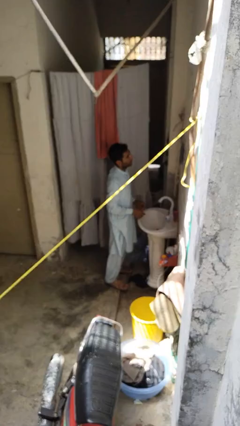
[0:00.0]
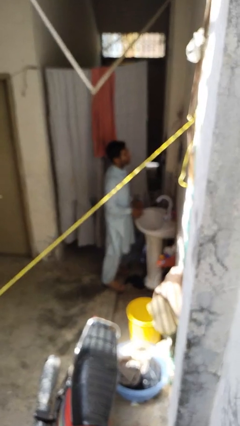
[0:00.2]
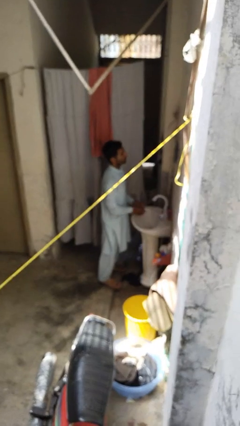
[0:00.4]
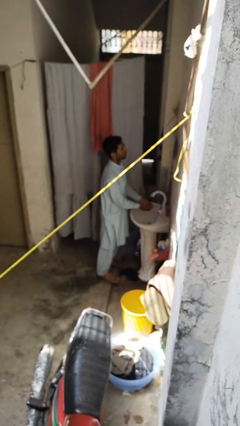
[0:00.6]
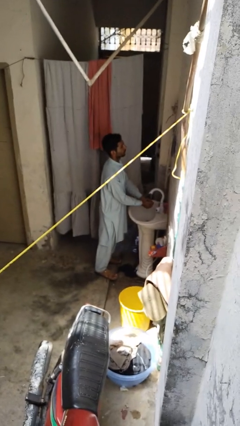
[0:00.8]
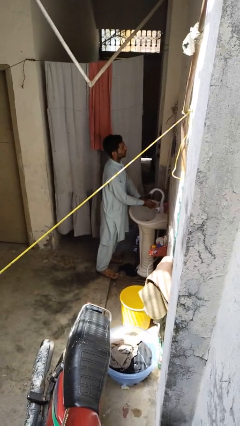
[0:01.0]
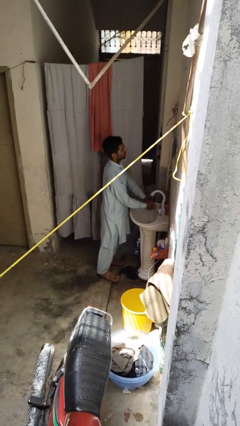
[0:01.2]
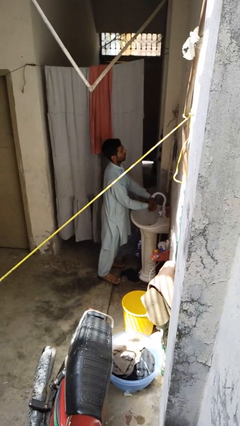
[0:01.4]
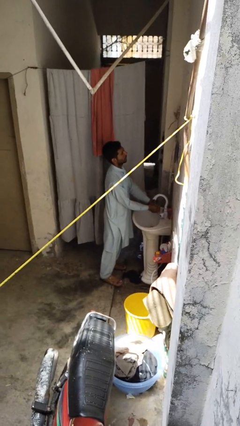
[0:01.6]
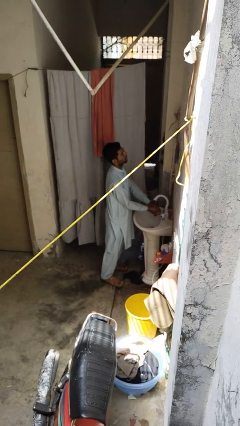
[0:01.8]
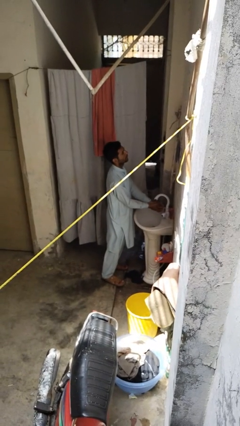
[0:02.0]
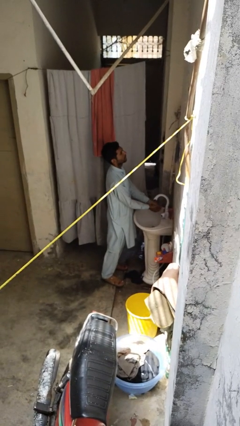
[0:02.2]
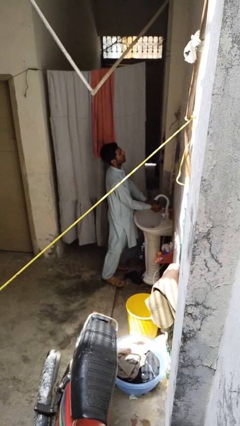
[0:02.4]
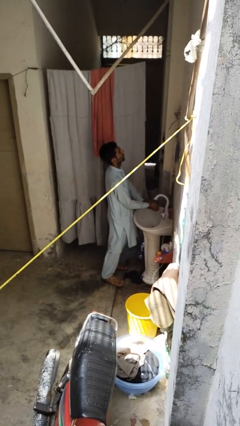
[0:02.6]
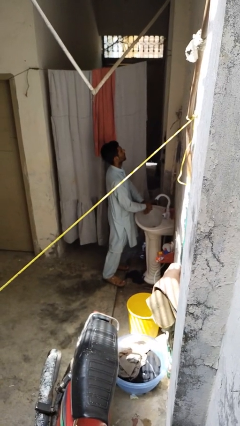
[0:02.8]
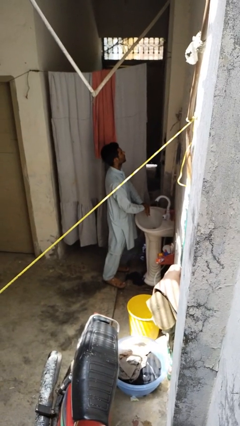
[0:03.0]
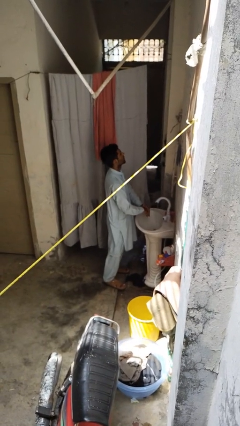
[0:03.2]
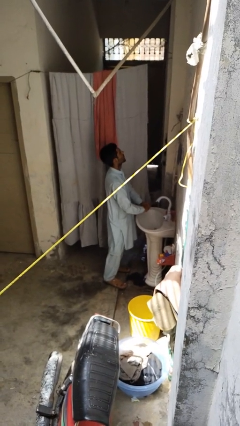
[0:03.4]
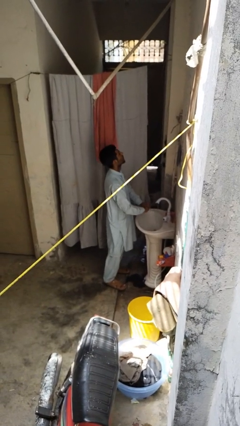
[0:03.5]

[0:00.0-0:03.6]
person washes hands

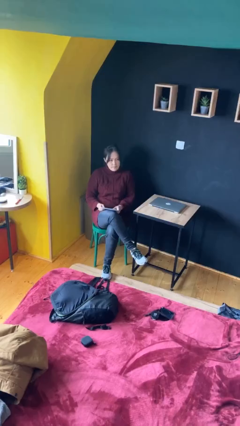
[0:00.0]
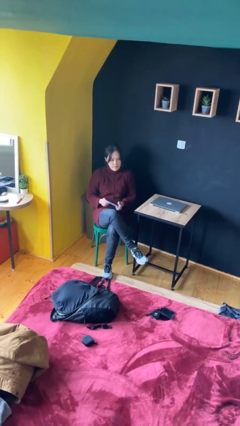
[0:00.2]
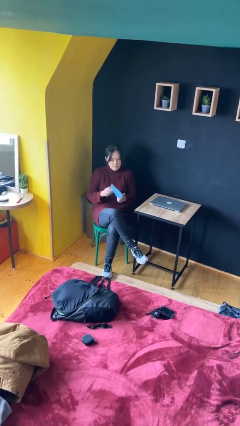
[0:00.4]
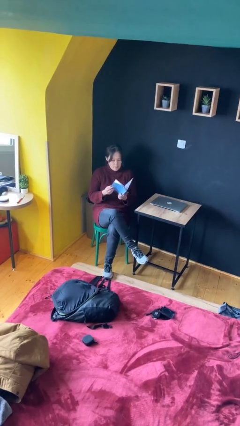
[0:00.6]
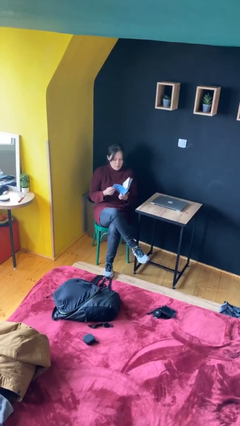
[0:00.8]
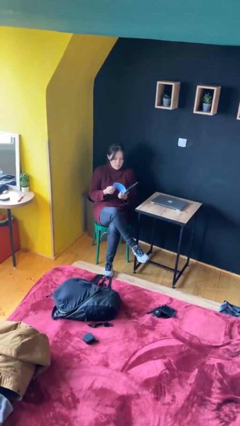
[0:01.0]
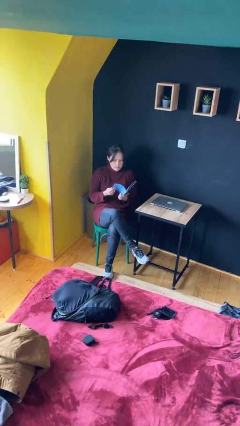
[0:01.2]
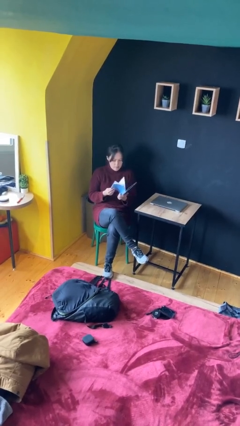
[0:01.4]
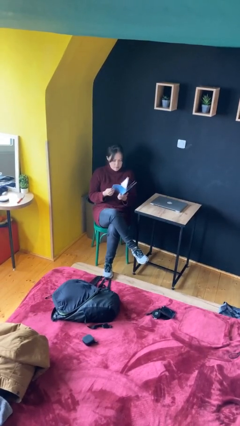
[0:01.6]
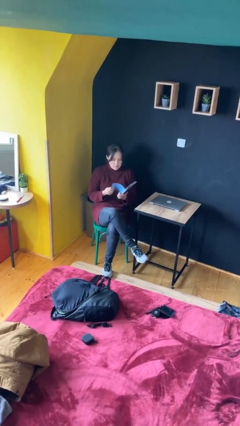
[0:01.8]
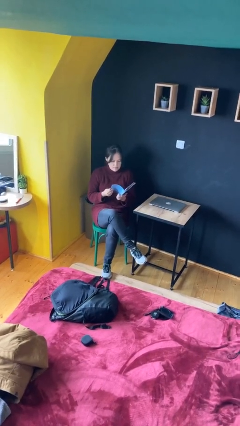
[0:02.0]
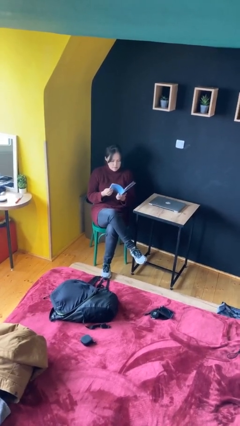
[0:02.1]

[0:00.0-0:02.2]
person reads document

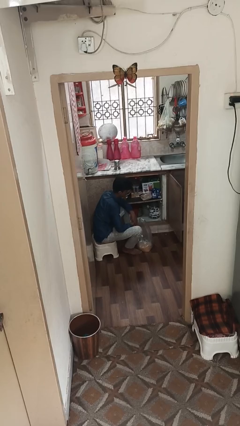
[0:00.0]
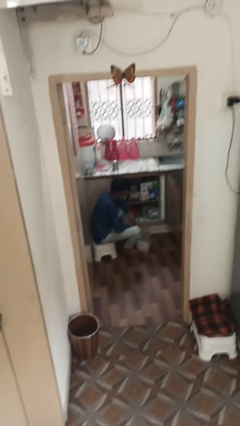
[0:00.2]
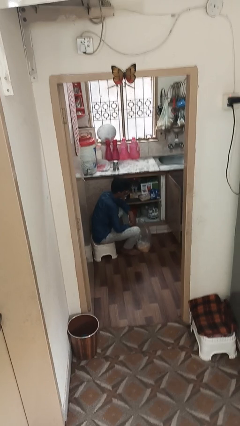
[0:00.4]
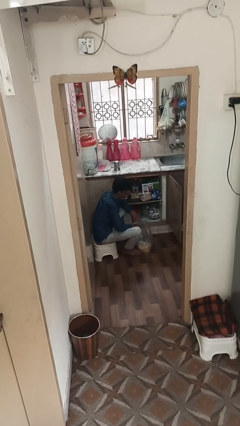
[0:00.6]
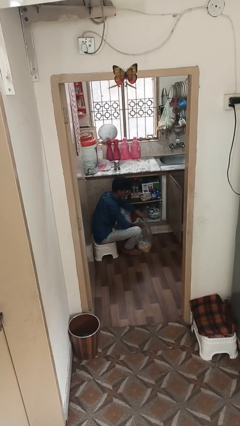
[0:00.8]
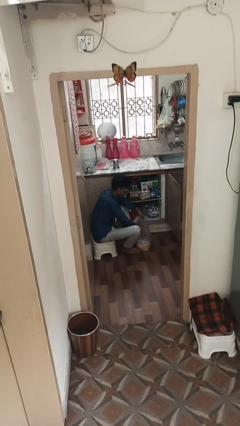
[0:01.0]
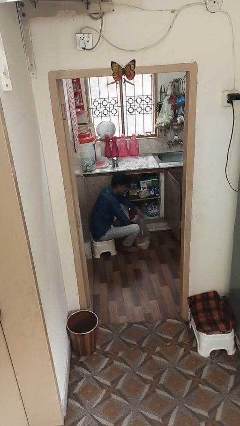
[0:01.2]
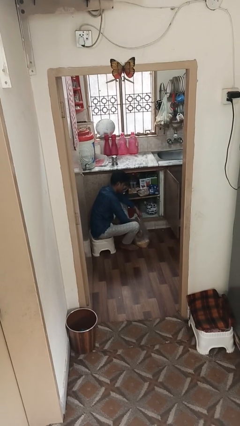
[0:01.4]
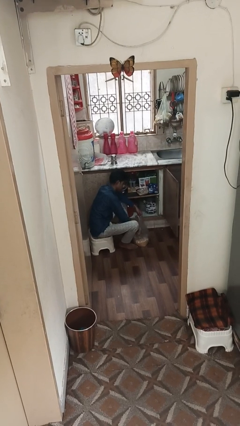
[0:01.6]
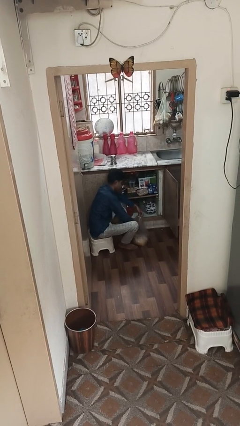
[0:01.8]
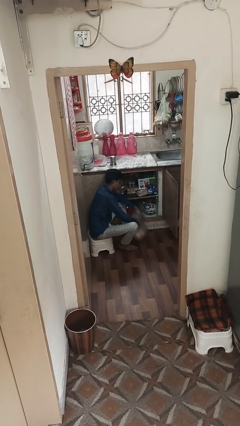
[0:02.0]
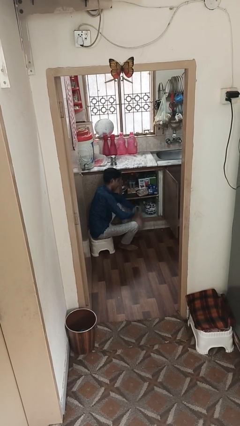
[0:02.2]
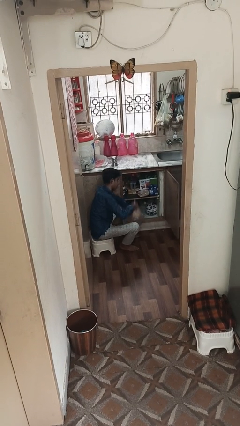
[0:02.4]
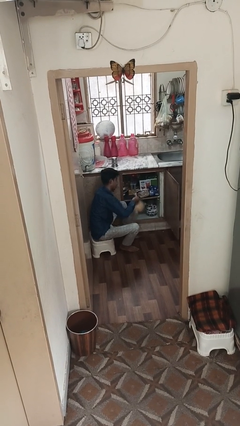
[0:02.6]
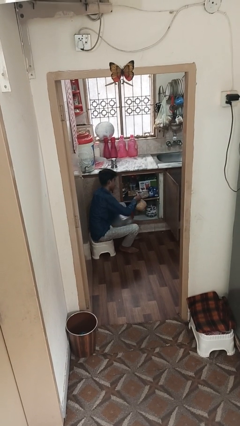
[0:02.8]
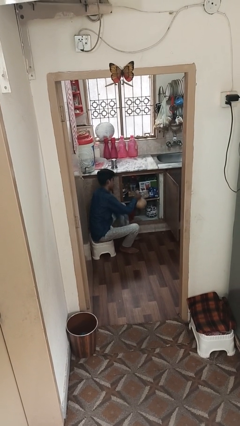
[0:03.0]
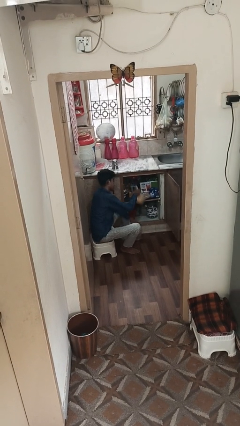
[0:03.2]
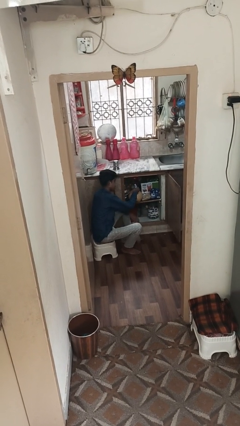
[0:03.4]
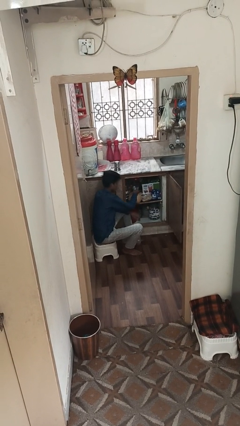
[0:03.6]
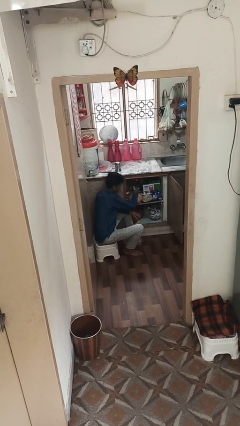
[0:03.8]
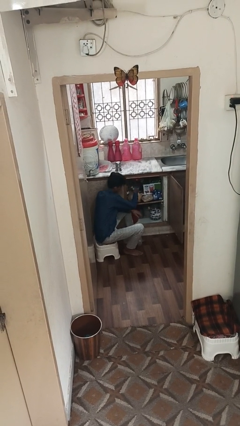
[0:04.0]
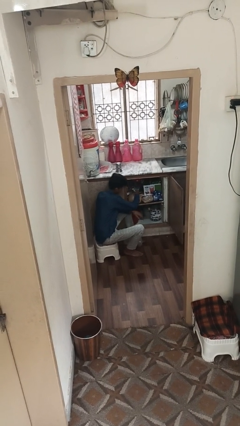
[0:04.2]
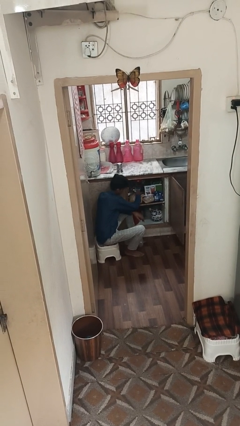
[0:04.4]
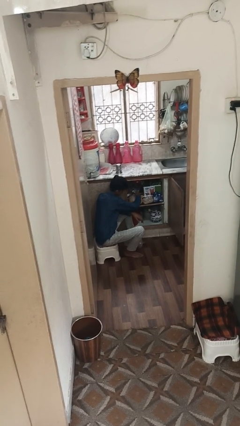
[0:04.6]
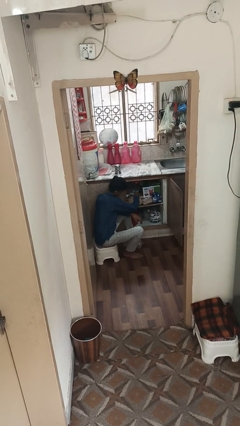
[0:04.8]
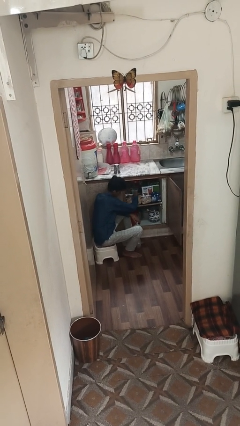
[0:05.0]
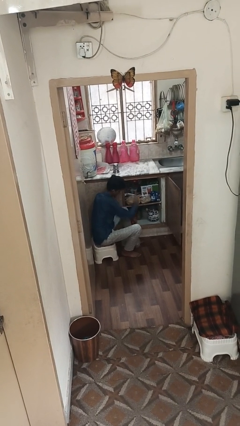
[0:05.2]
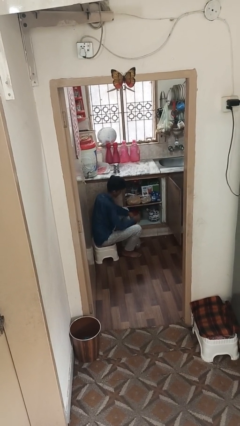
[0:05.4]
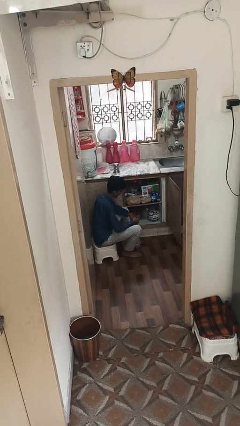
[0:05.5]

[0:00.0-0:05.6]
person loads groceries into cabinet

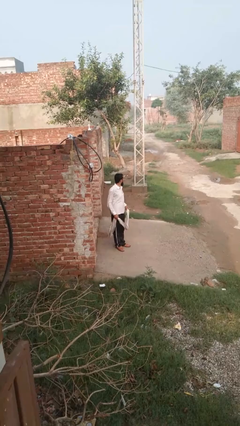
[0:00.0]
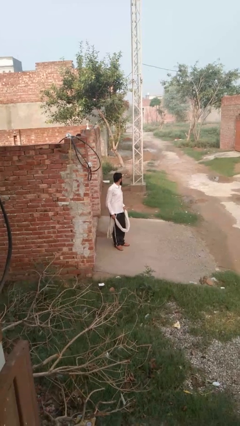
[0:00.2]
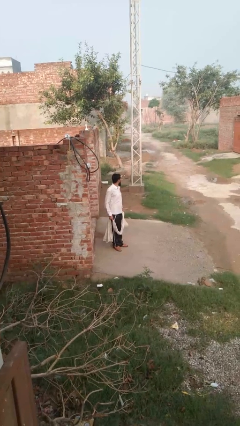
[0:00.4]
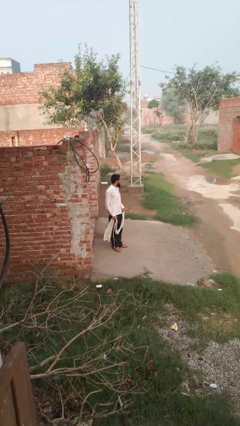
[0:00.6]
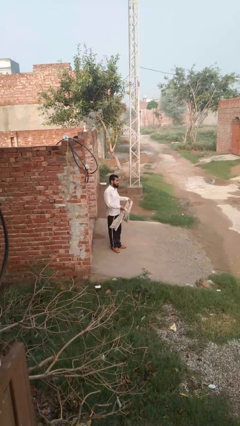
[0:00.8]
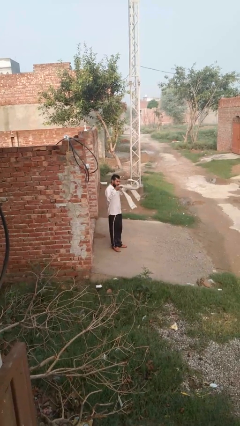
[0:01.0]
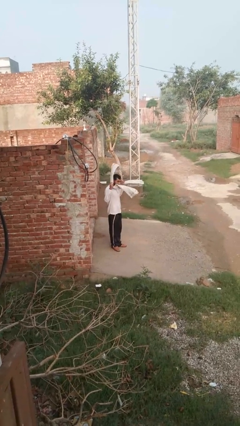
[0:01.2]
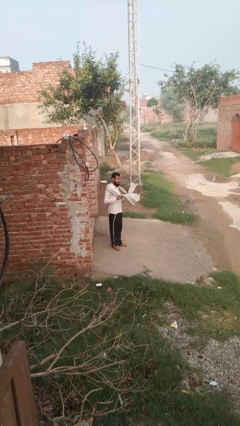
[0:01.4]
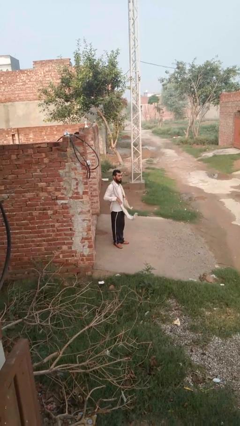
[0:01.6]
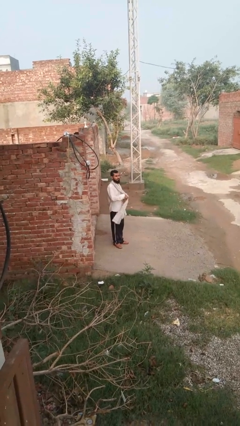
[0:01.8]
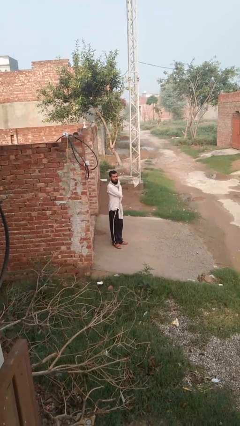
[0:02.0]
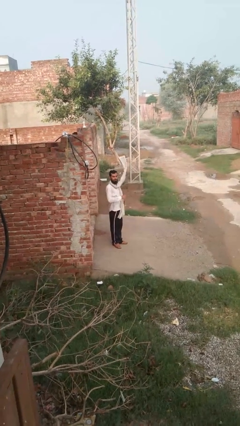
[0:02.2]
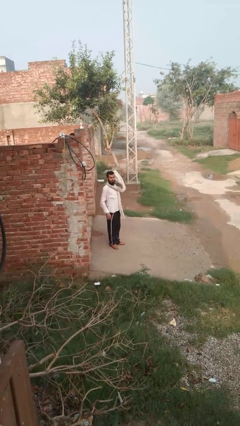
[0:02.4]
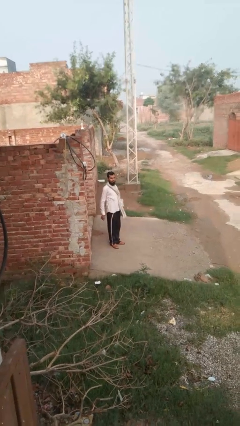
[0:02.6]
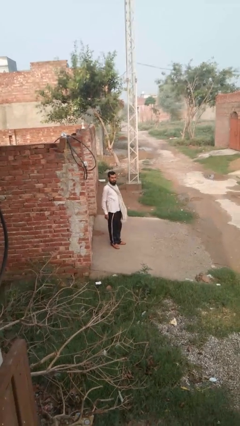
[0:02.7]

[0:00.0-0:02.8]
person puts on scarf

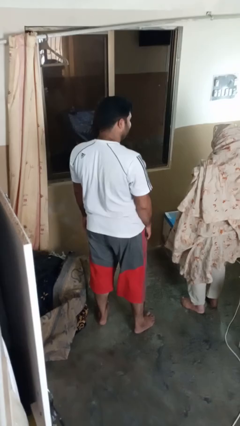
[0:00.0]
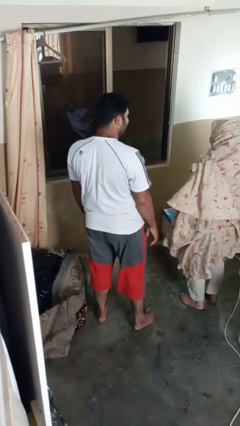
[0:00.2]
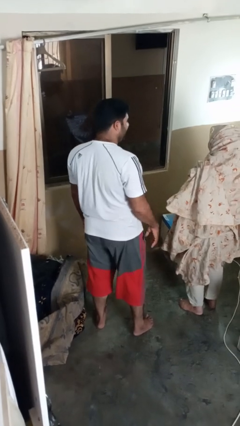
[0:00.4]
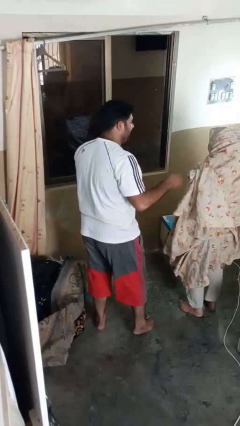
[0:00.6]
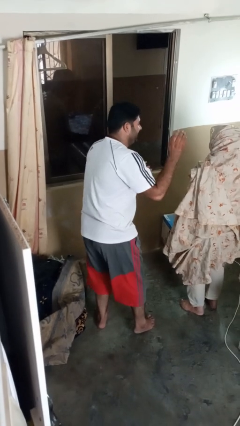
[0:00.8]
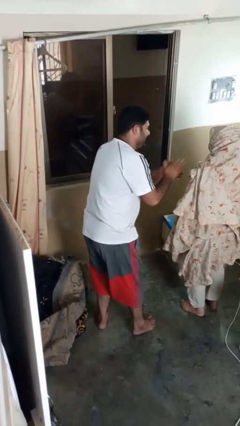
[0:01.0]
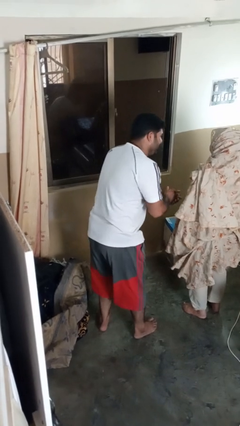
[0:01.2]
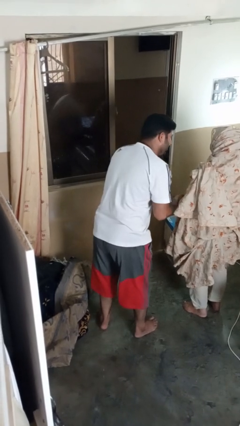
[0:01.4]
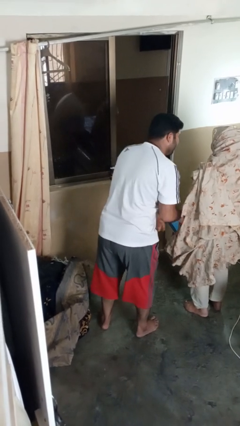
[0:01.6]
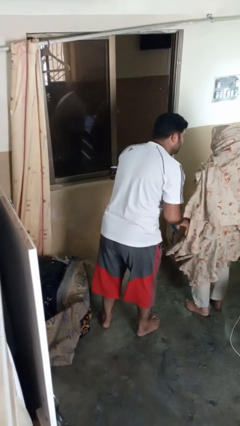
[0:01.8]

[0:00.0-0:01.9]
person laughs with person

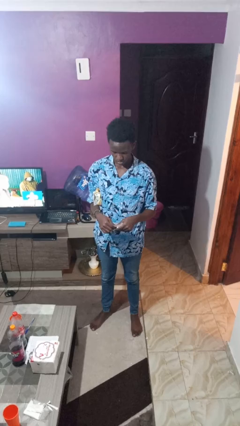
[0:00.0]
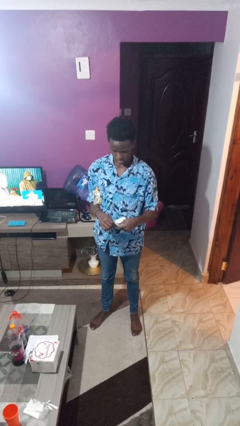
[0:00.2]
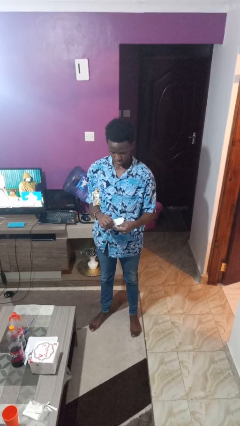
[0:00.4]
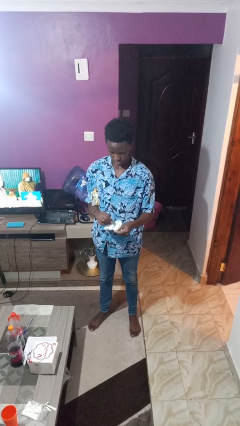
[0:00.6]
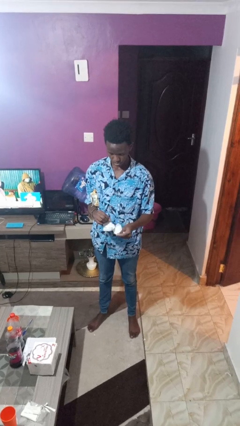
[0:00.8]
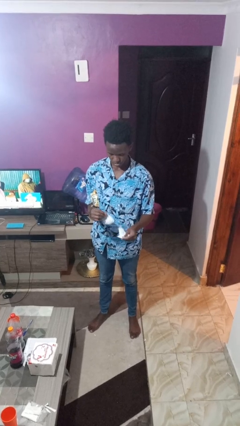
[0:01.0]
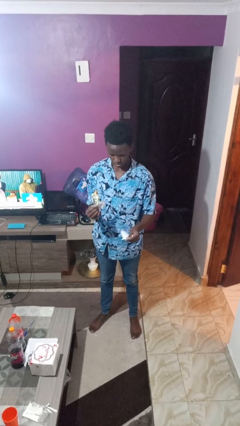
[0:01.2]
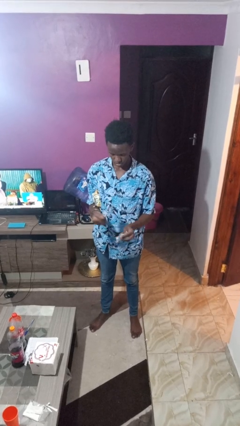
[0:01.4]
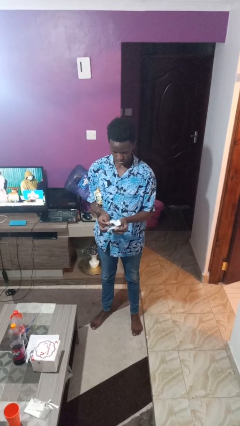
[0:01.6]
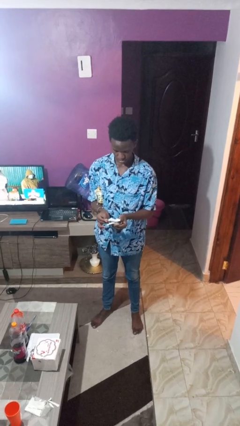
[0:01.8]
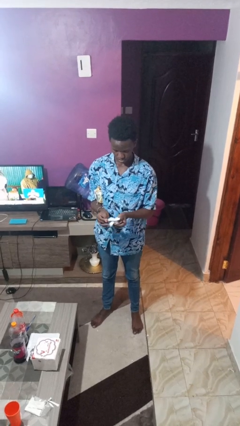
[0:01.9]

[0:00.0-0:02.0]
person tears paper
